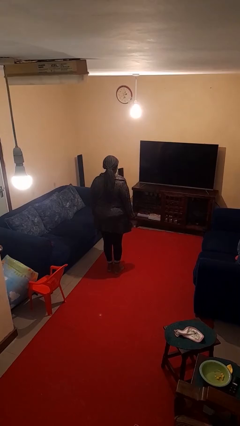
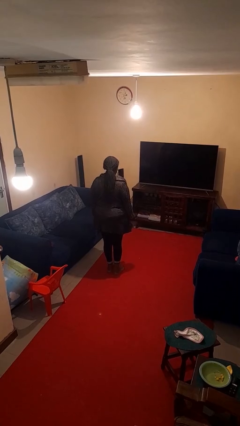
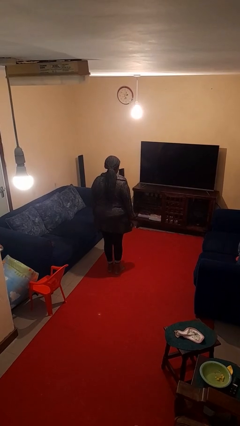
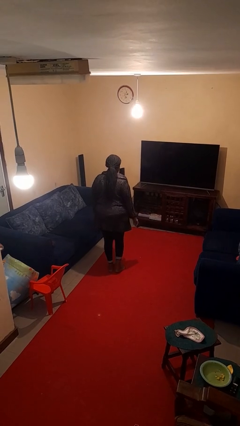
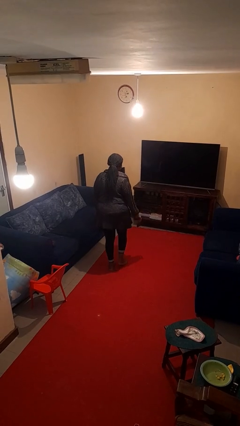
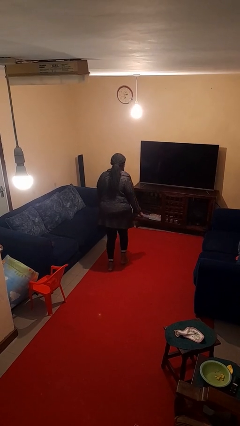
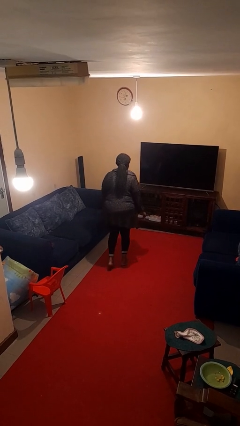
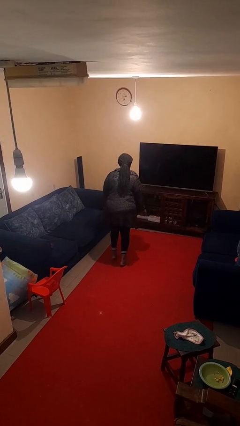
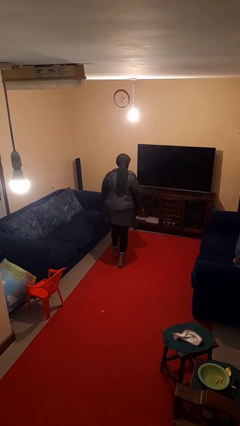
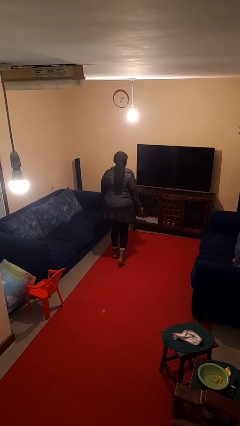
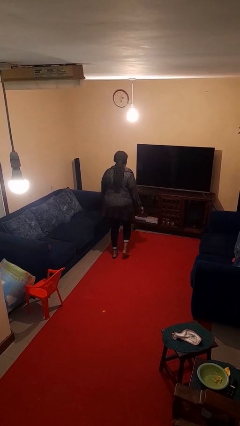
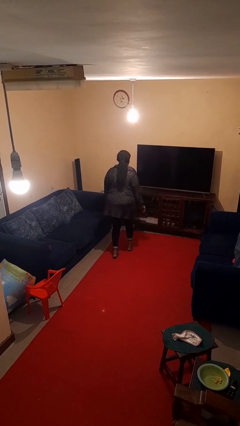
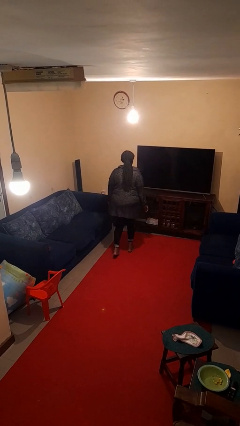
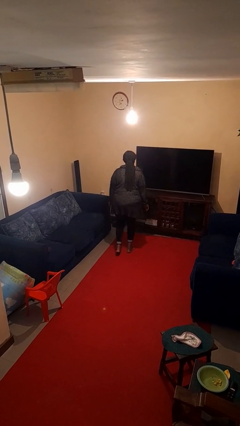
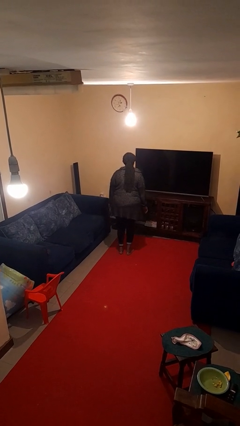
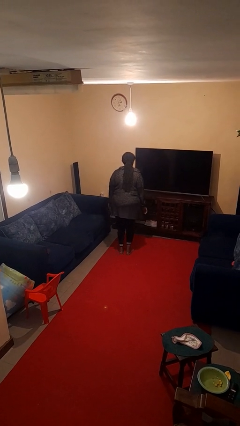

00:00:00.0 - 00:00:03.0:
person walks tiptoe

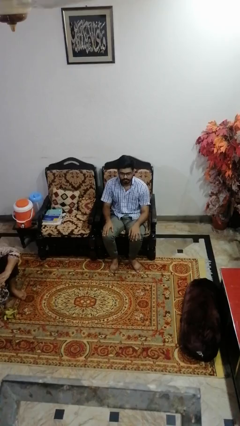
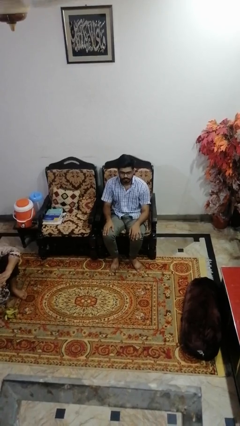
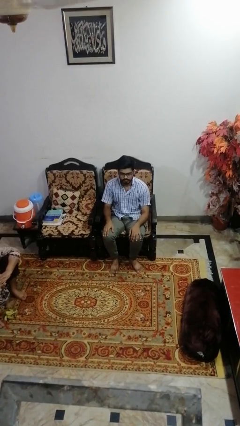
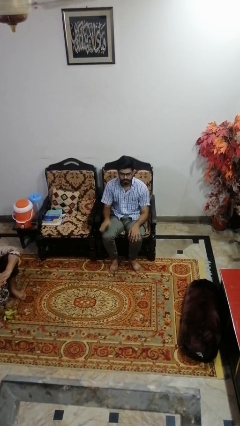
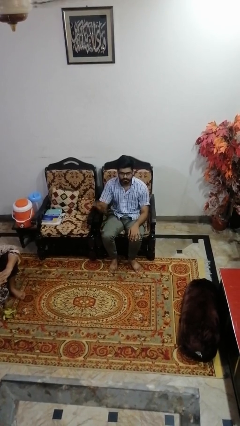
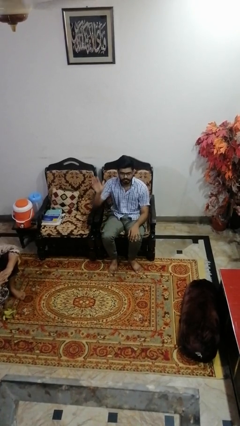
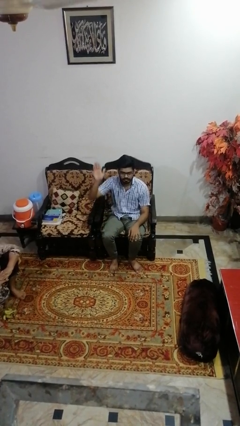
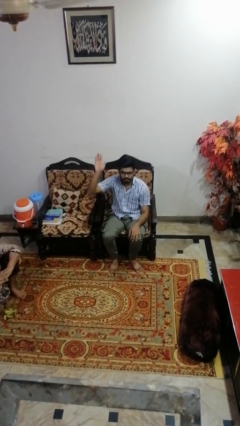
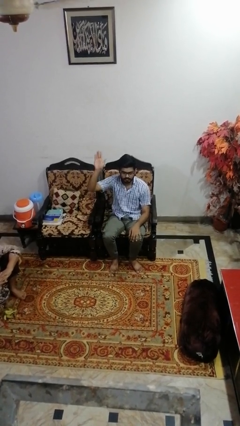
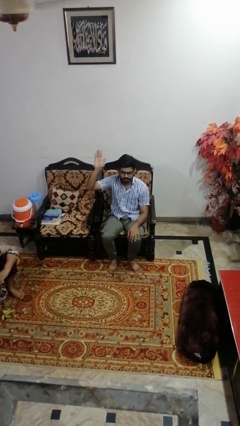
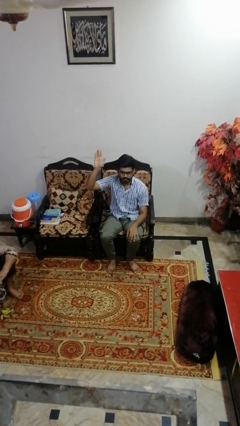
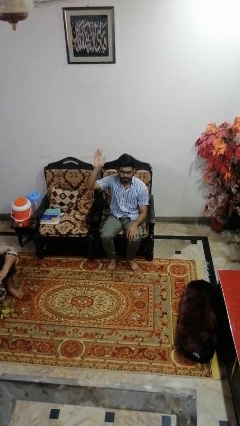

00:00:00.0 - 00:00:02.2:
person gestures raise hand

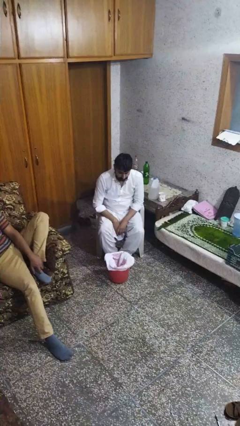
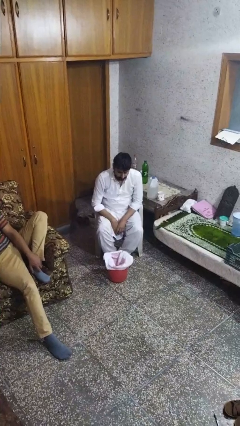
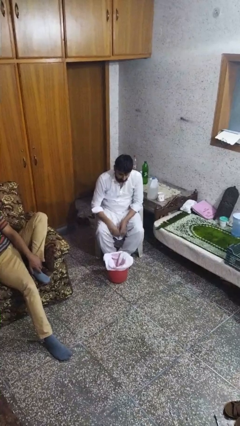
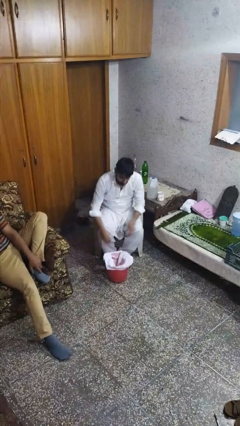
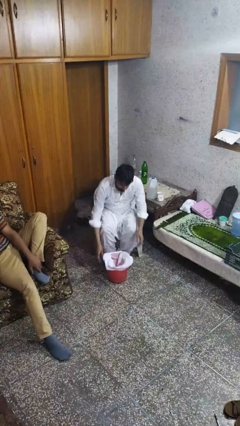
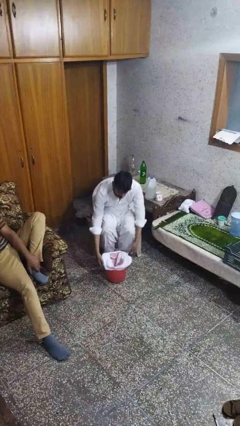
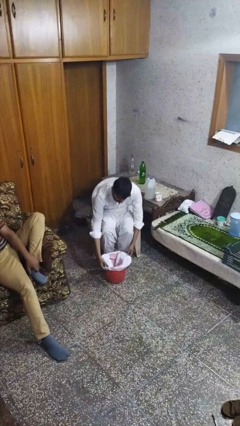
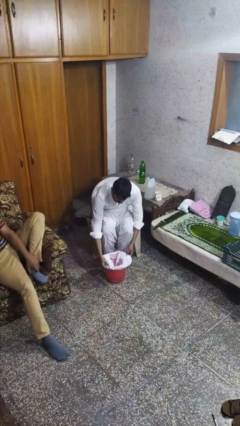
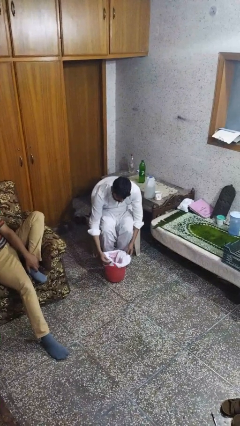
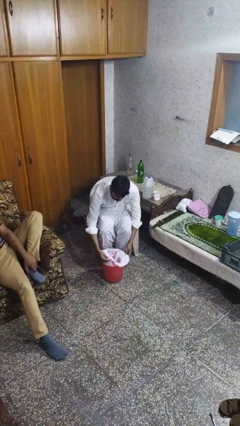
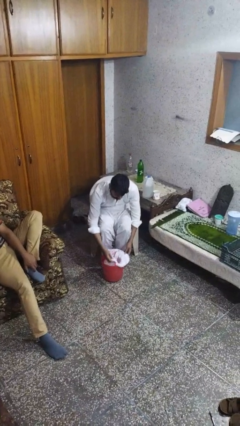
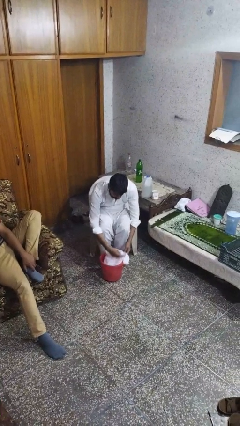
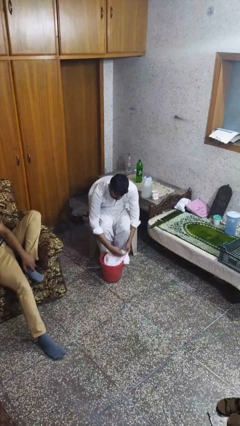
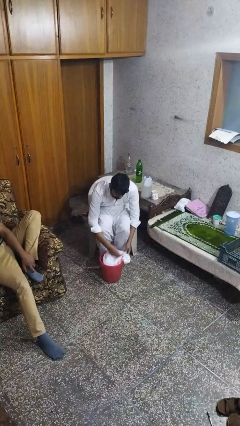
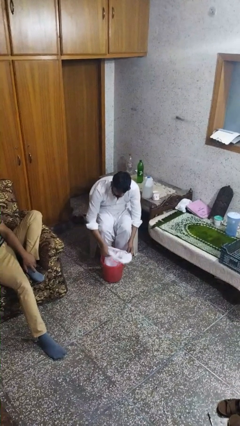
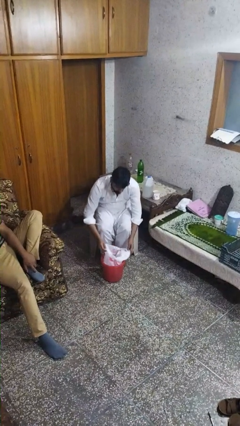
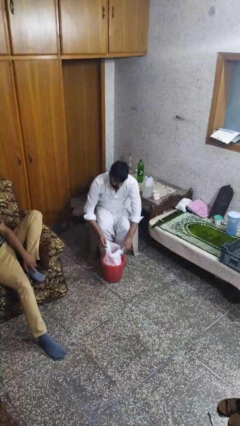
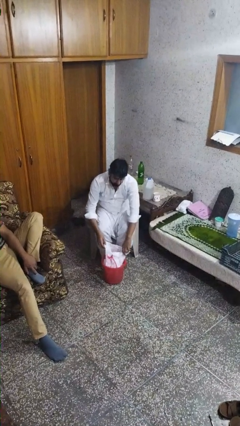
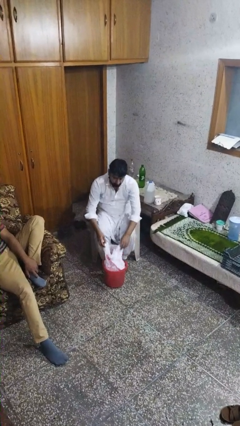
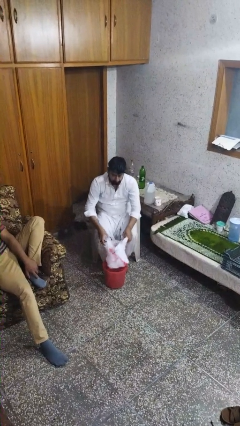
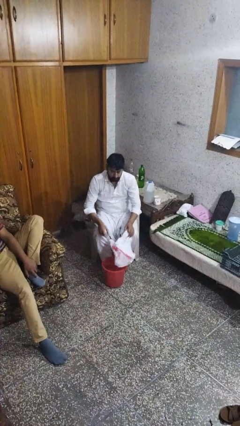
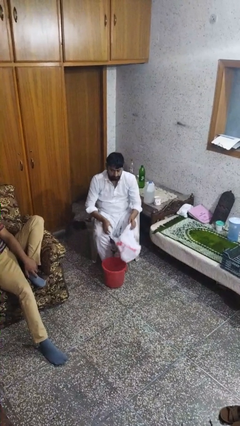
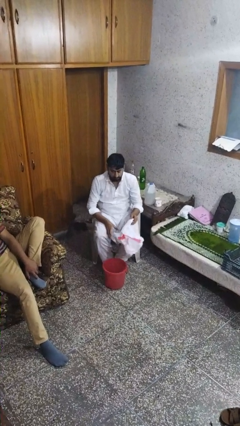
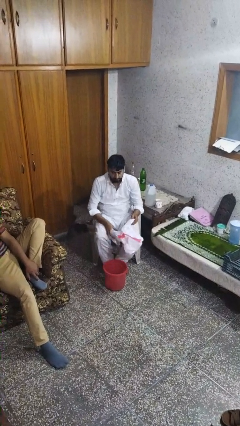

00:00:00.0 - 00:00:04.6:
person removes trashbag from trashcan

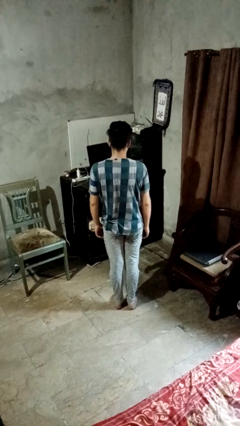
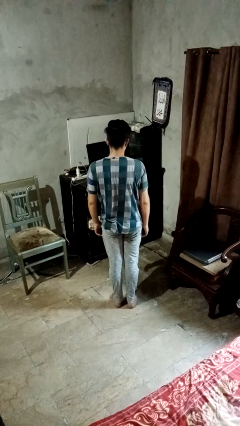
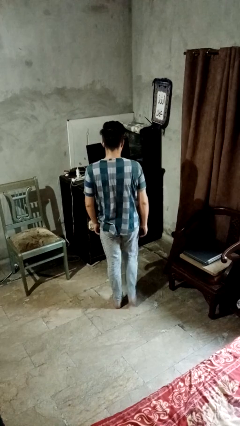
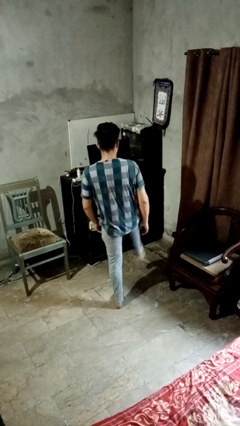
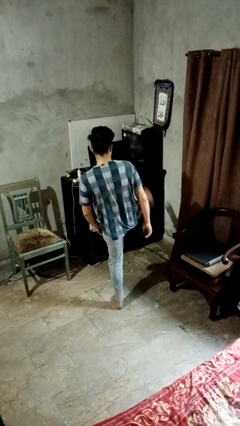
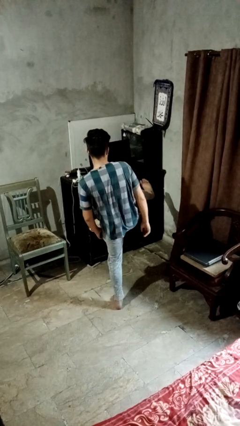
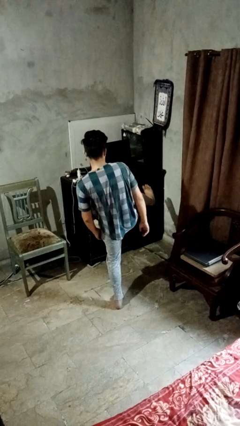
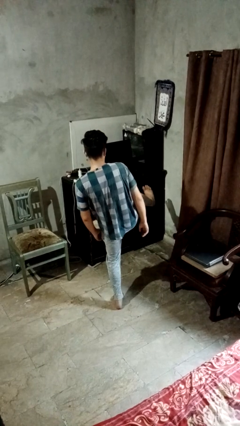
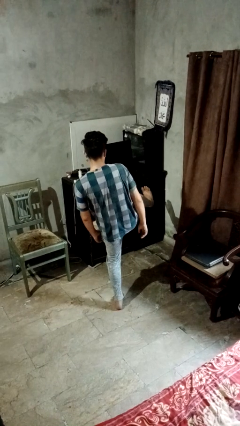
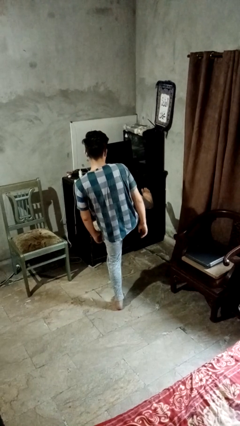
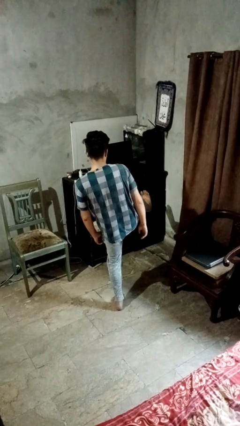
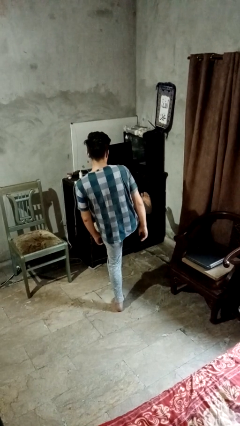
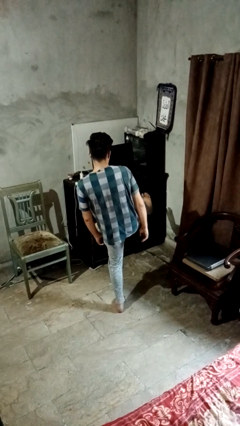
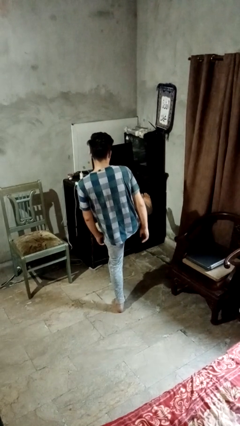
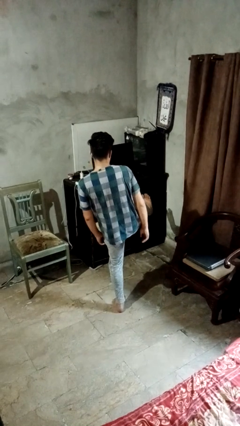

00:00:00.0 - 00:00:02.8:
person karate kicks

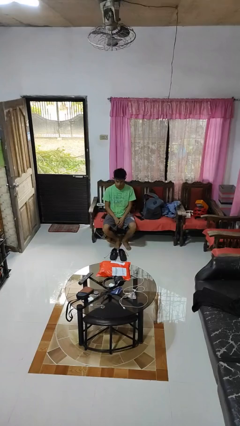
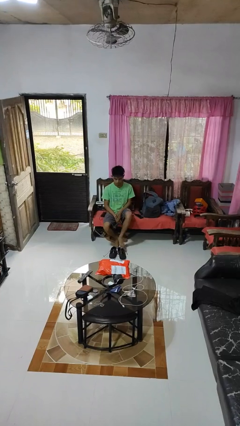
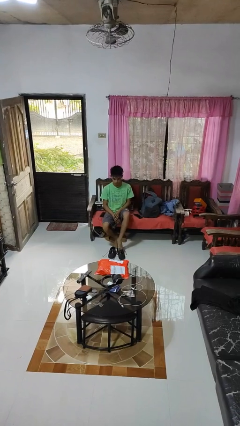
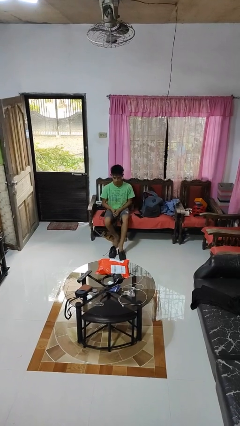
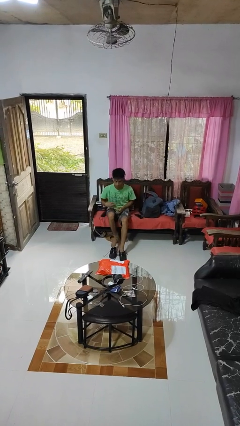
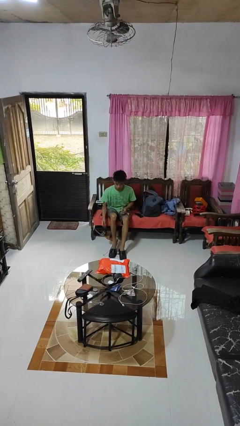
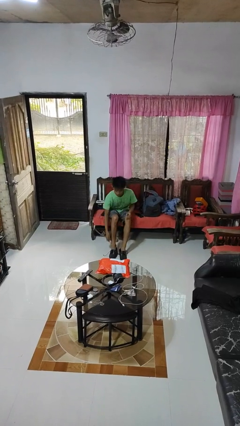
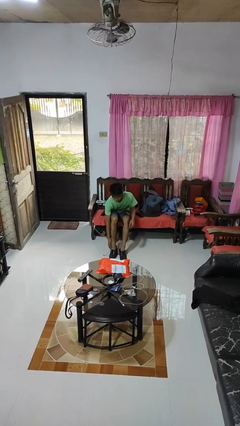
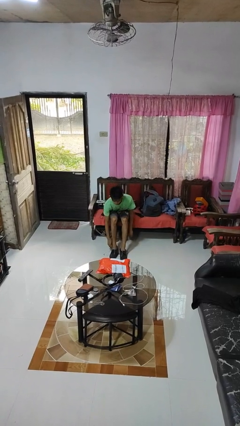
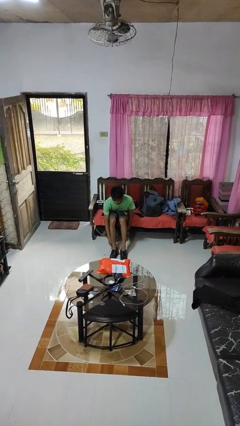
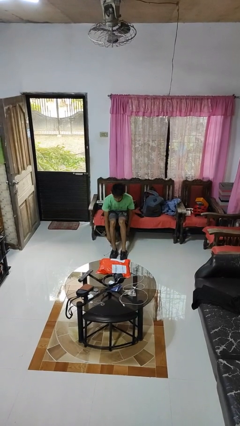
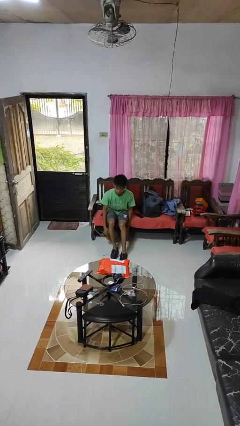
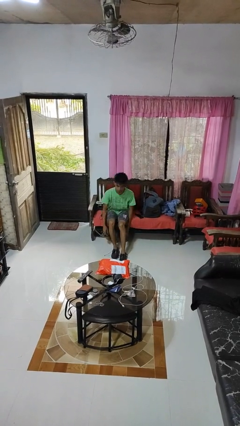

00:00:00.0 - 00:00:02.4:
person puts on shoes

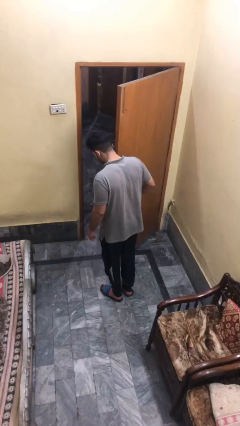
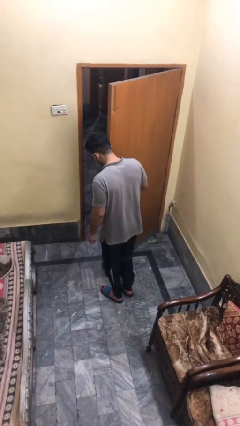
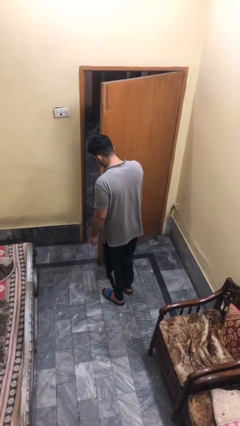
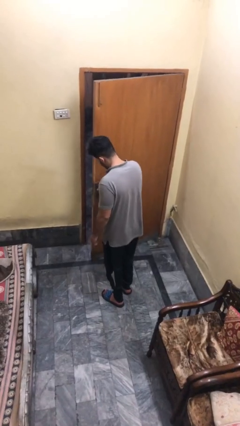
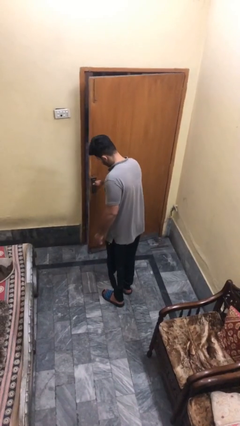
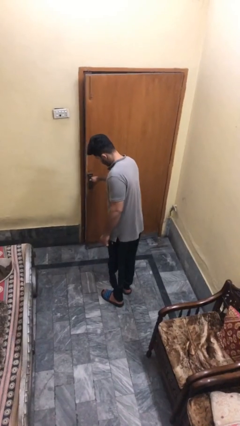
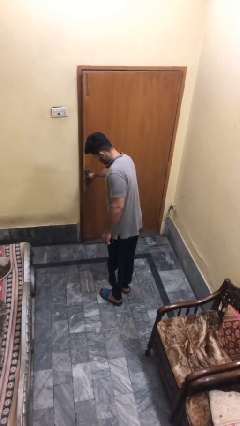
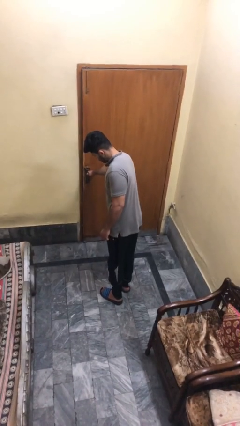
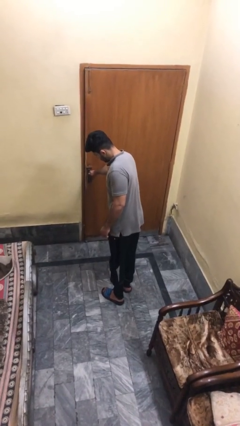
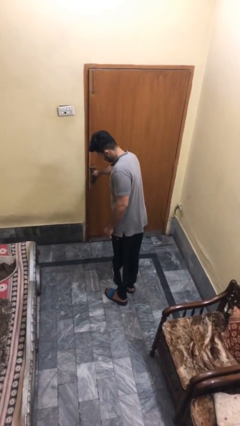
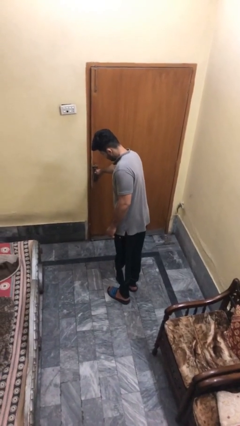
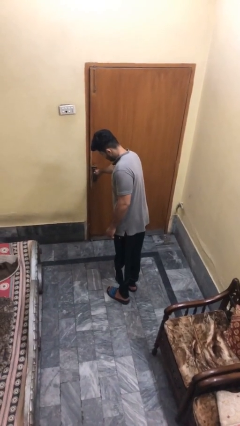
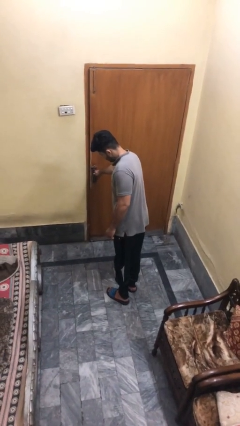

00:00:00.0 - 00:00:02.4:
person closes facility door
